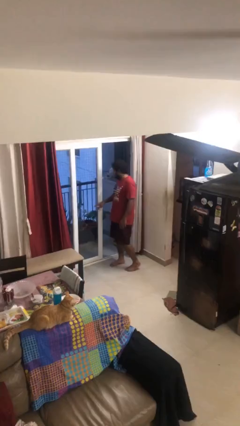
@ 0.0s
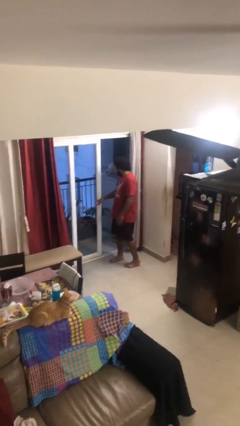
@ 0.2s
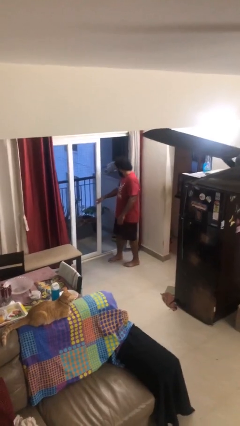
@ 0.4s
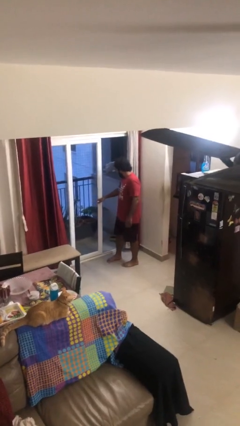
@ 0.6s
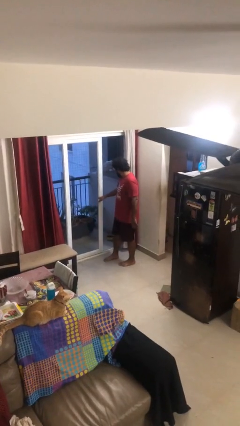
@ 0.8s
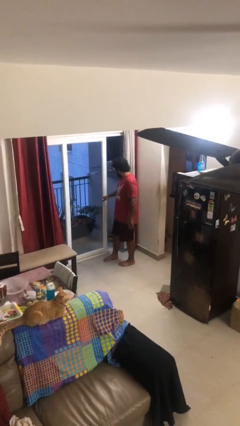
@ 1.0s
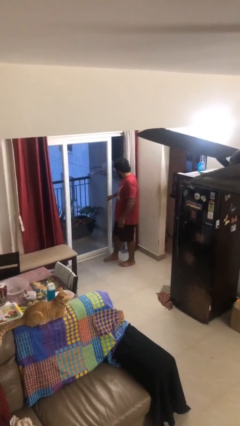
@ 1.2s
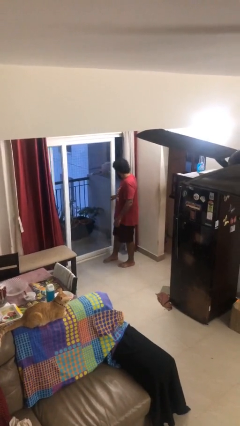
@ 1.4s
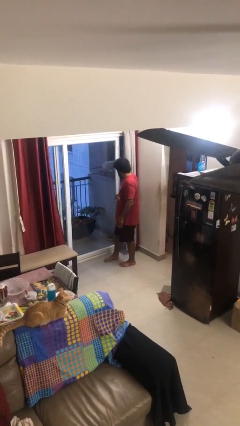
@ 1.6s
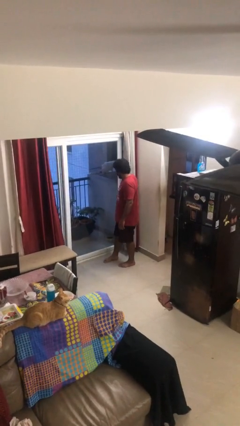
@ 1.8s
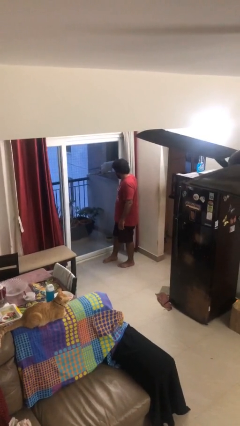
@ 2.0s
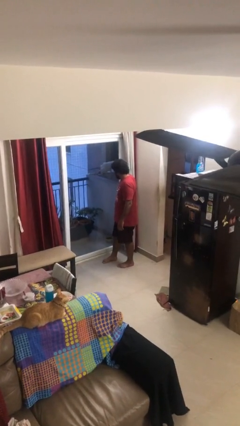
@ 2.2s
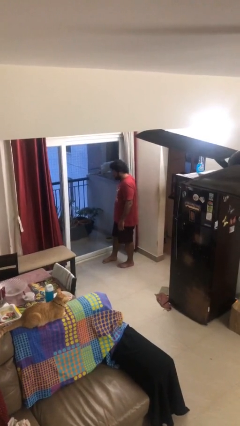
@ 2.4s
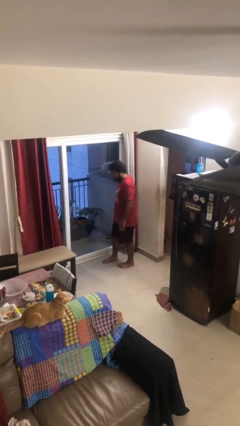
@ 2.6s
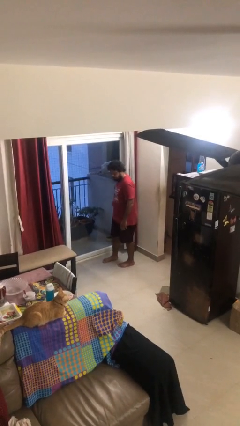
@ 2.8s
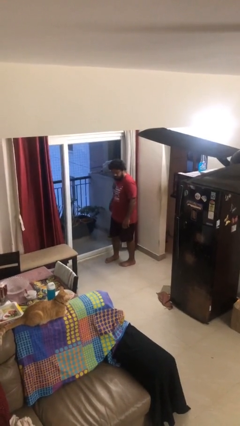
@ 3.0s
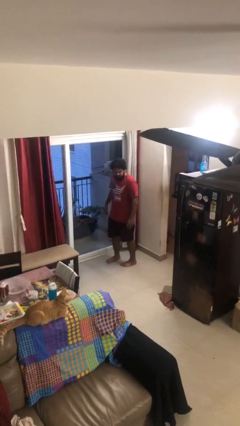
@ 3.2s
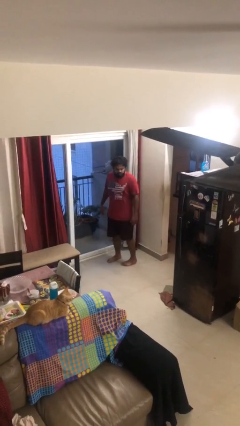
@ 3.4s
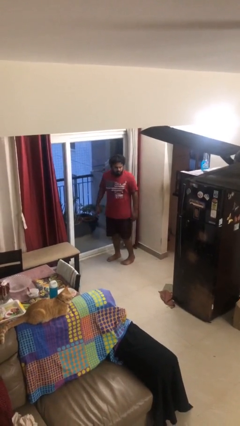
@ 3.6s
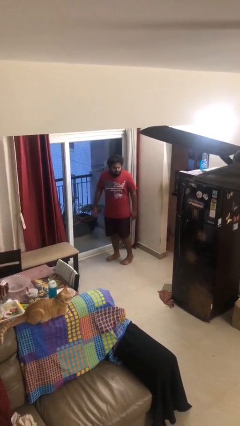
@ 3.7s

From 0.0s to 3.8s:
person closes facility door

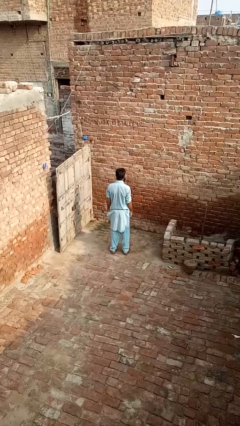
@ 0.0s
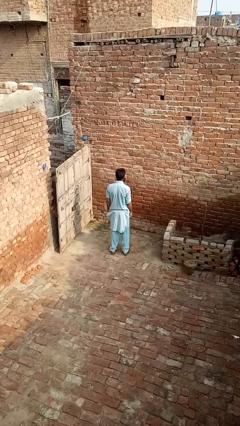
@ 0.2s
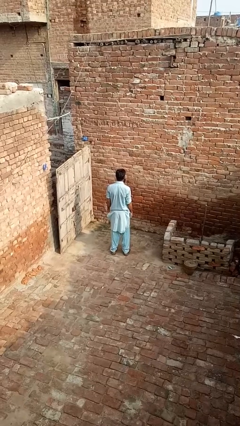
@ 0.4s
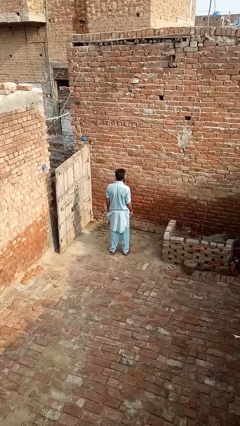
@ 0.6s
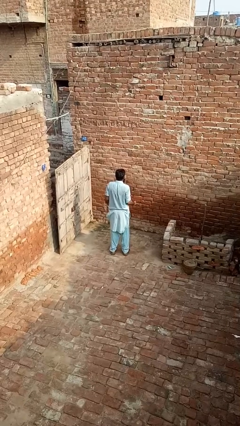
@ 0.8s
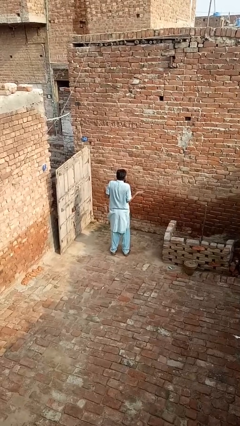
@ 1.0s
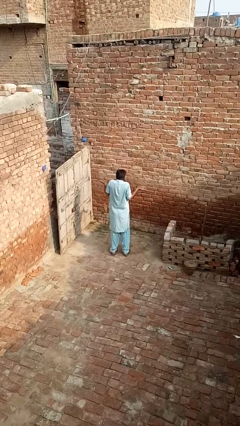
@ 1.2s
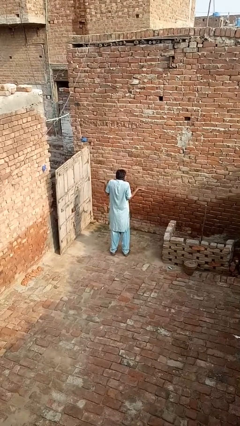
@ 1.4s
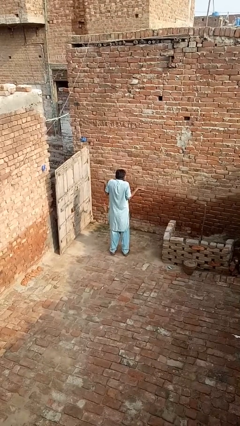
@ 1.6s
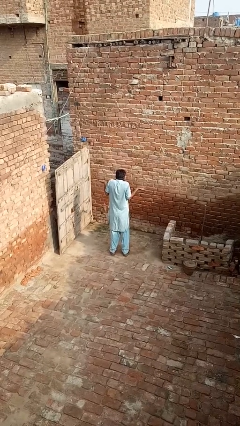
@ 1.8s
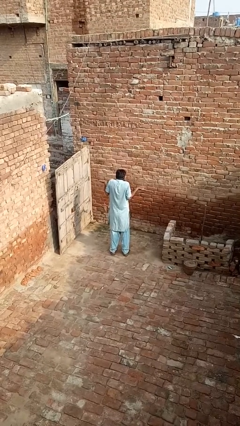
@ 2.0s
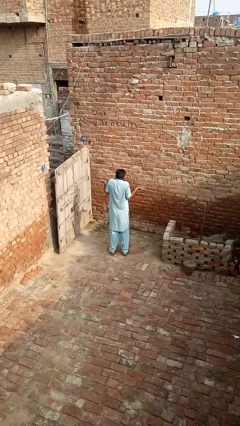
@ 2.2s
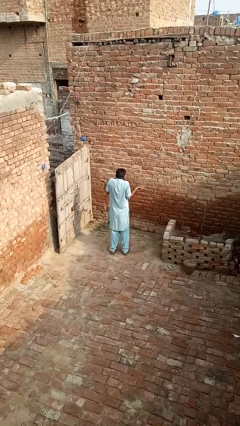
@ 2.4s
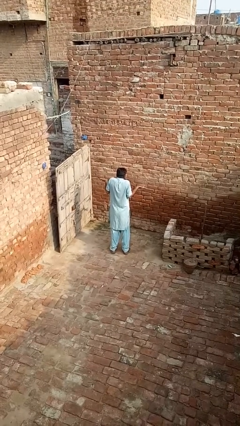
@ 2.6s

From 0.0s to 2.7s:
person shrugs

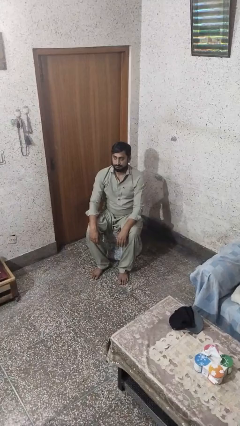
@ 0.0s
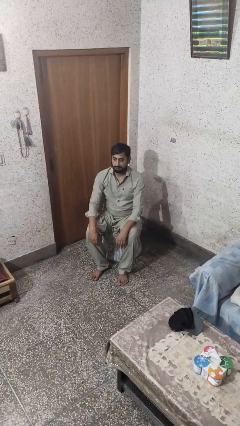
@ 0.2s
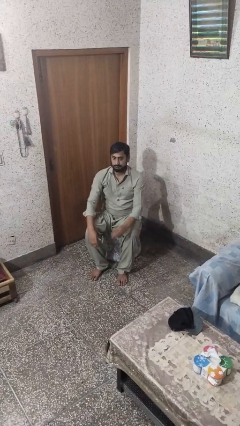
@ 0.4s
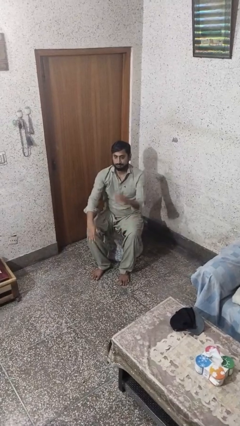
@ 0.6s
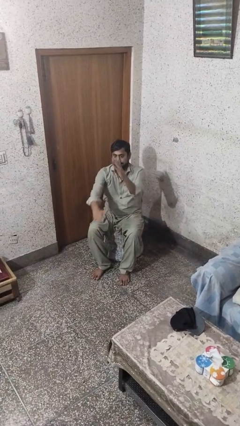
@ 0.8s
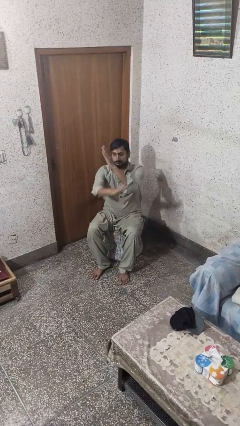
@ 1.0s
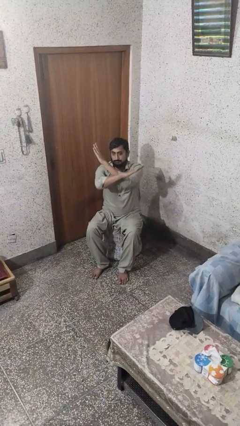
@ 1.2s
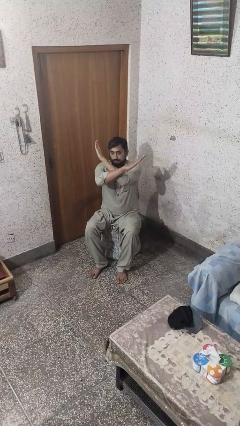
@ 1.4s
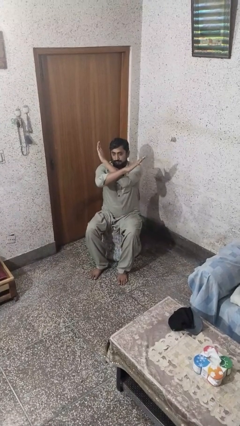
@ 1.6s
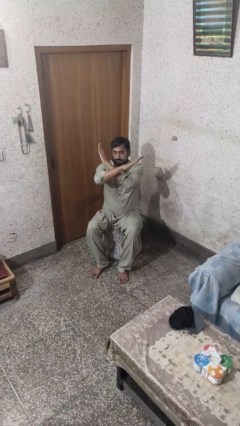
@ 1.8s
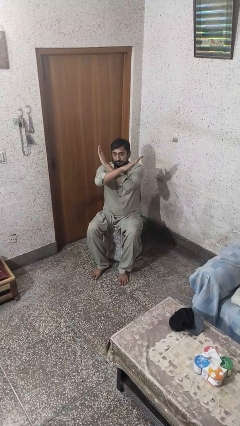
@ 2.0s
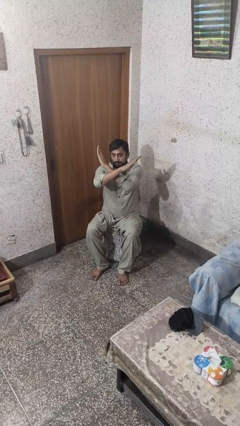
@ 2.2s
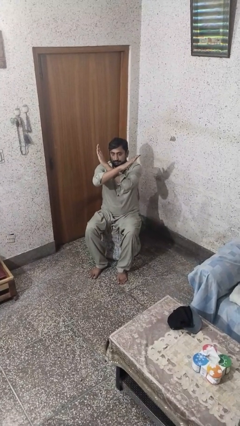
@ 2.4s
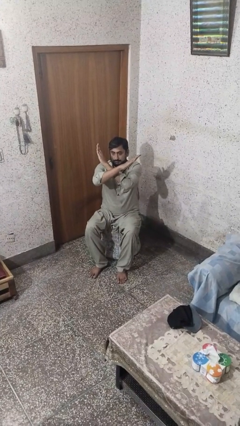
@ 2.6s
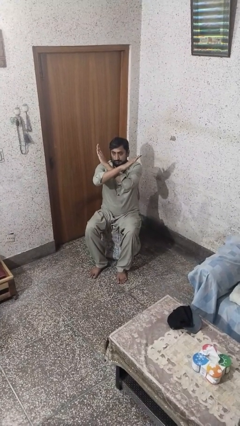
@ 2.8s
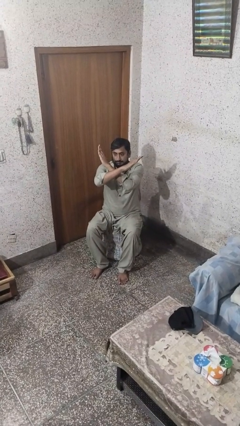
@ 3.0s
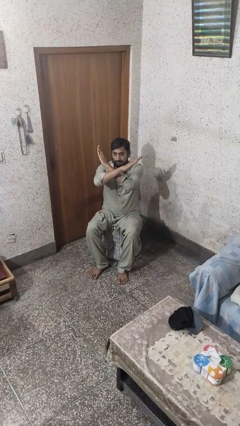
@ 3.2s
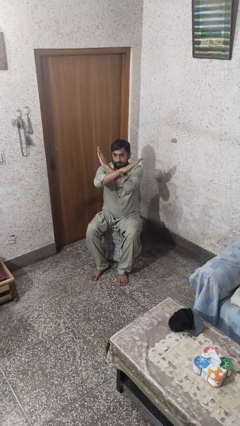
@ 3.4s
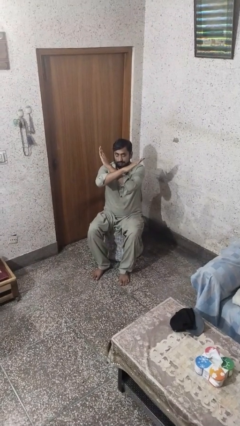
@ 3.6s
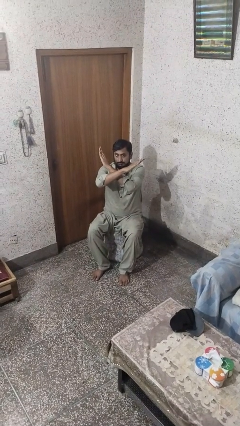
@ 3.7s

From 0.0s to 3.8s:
person gestures arms x

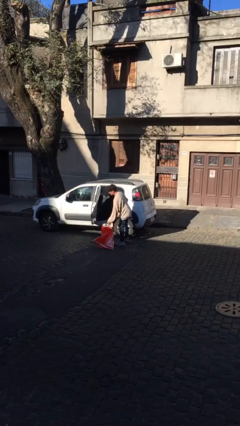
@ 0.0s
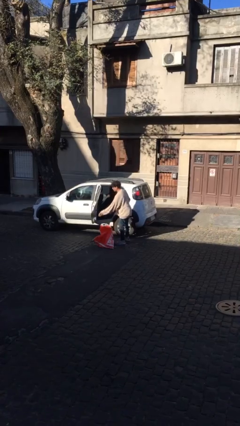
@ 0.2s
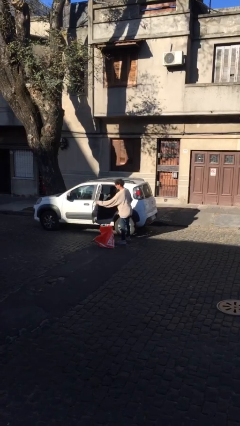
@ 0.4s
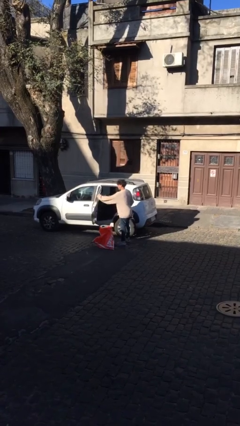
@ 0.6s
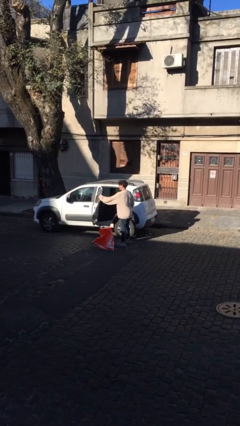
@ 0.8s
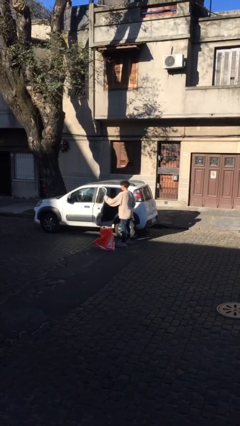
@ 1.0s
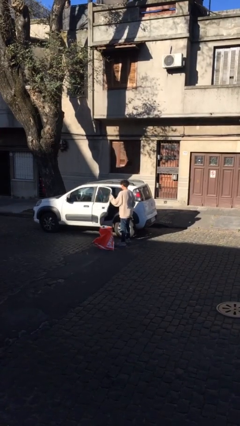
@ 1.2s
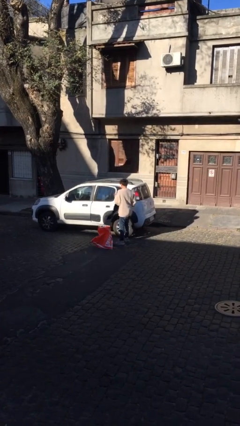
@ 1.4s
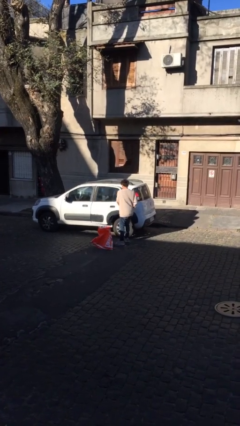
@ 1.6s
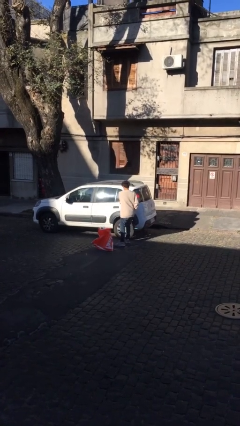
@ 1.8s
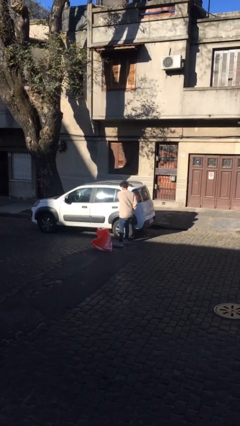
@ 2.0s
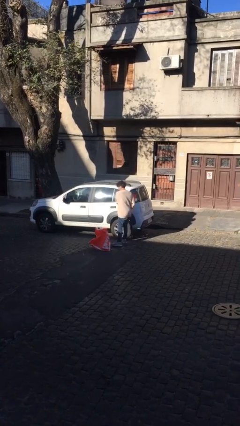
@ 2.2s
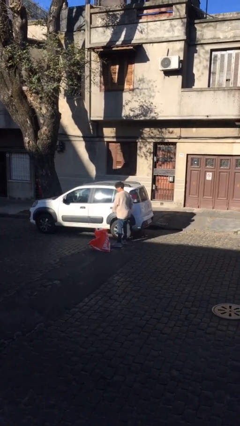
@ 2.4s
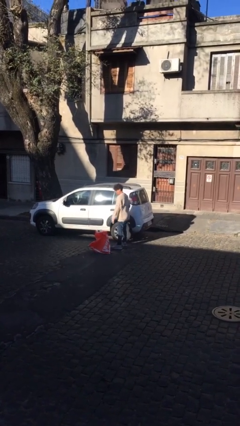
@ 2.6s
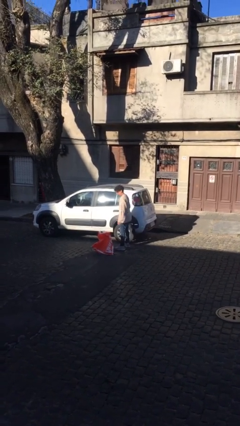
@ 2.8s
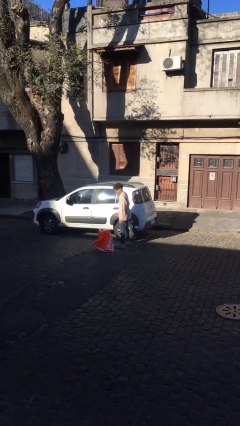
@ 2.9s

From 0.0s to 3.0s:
person closes car door

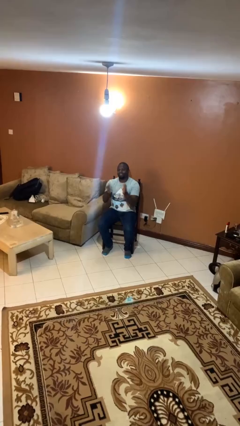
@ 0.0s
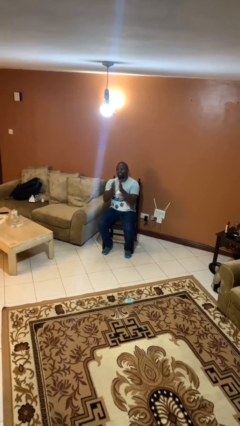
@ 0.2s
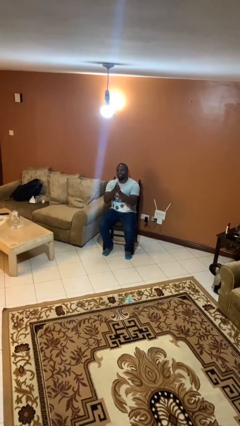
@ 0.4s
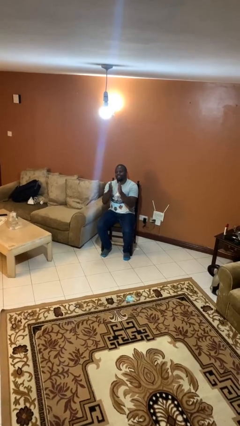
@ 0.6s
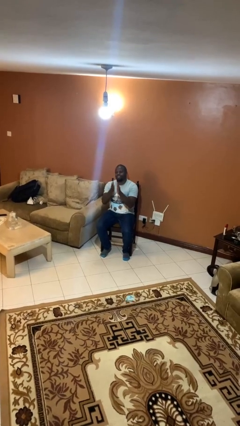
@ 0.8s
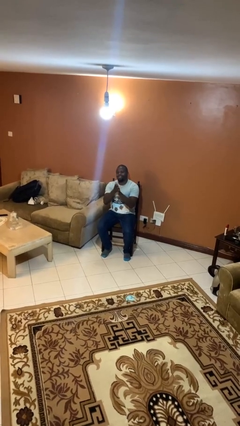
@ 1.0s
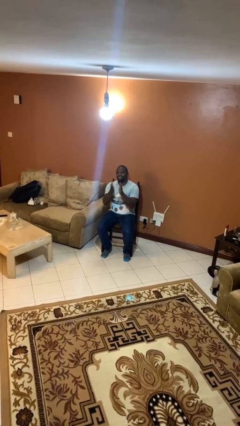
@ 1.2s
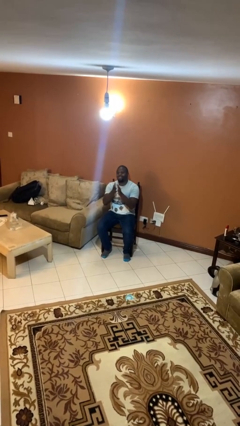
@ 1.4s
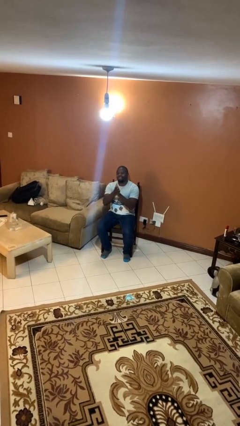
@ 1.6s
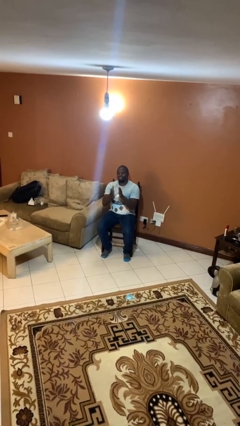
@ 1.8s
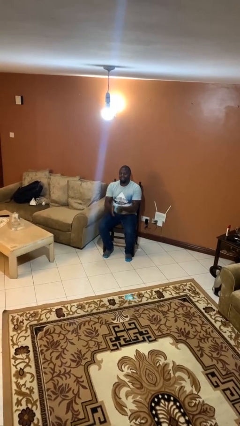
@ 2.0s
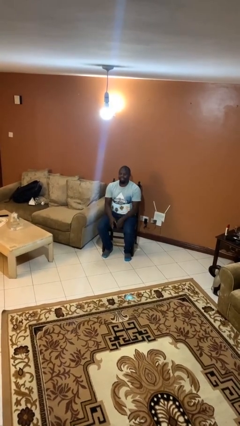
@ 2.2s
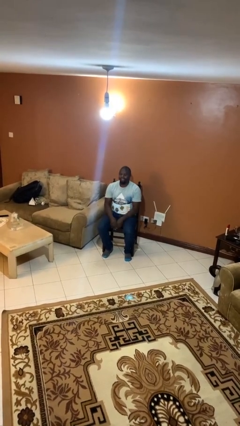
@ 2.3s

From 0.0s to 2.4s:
person claps hands

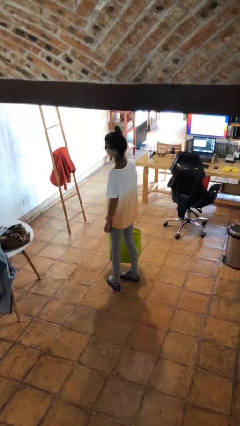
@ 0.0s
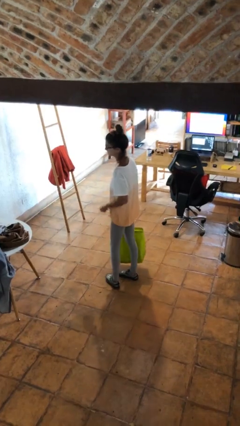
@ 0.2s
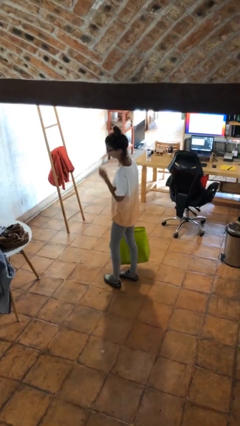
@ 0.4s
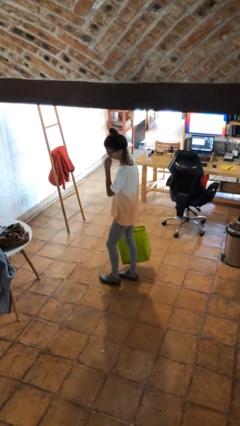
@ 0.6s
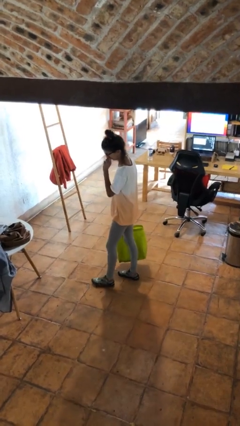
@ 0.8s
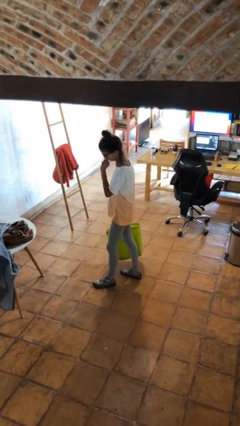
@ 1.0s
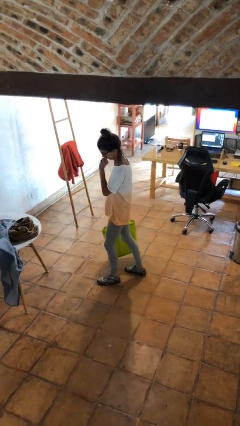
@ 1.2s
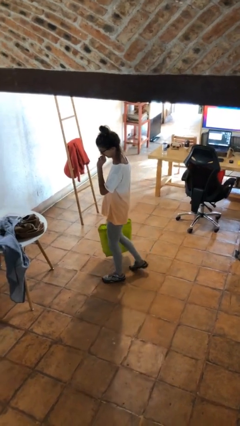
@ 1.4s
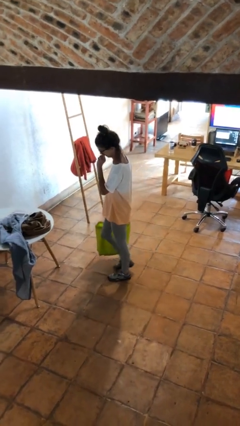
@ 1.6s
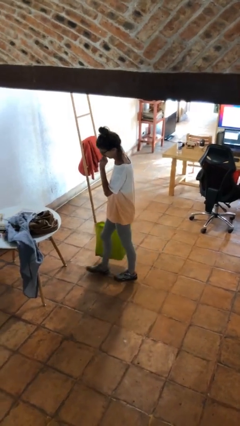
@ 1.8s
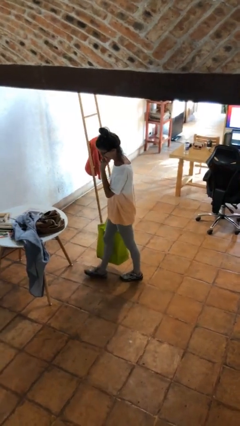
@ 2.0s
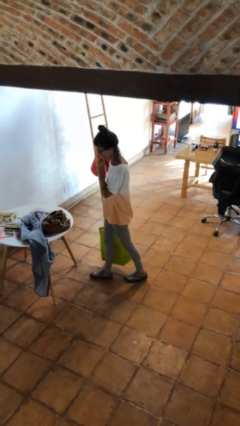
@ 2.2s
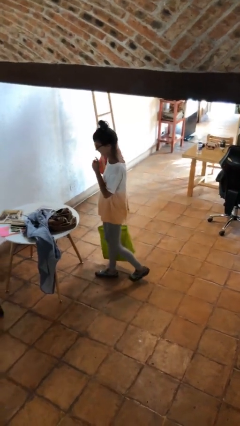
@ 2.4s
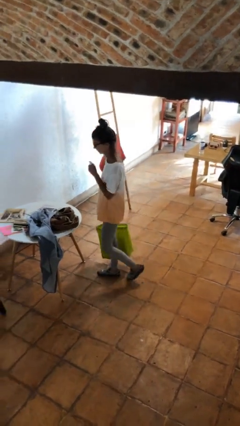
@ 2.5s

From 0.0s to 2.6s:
person carries groceries
